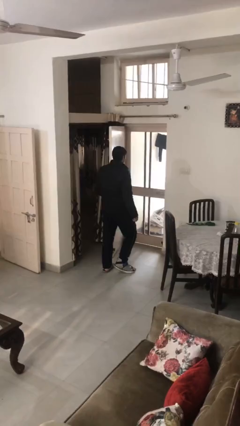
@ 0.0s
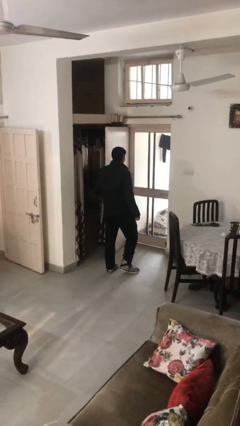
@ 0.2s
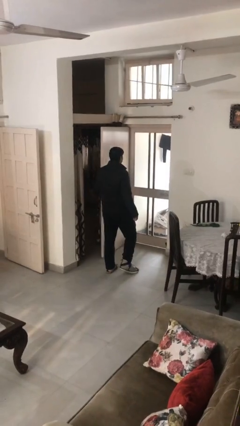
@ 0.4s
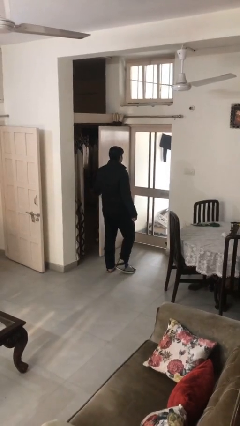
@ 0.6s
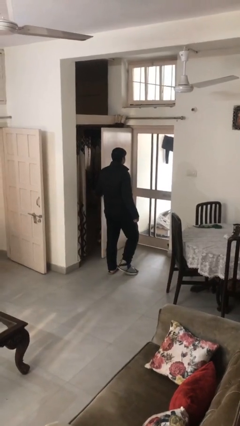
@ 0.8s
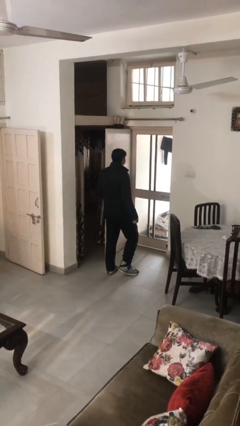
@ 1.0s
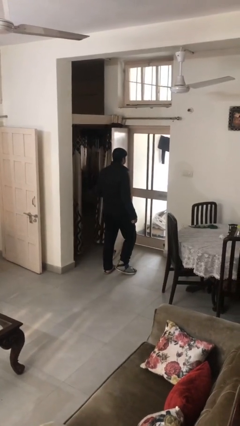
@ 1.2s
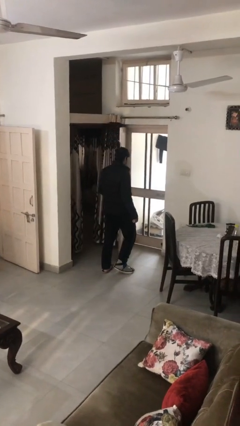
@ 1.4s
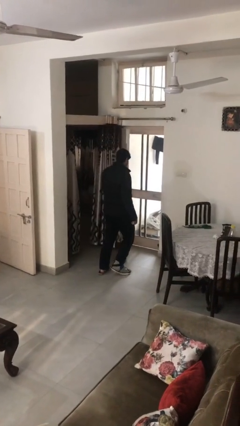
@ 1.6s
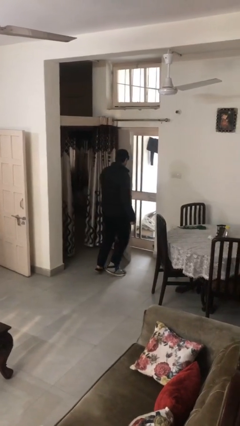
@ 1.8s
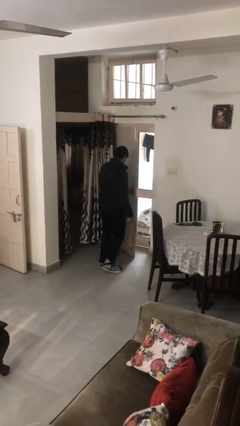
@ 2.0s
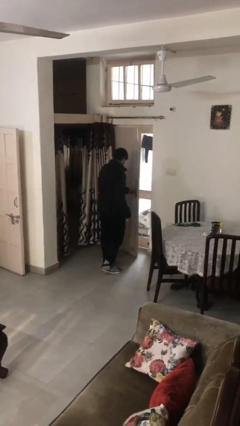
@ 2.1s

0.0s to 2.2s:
person closes facility door

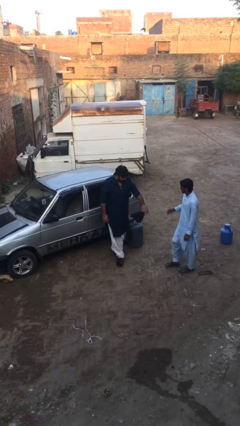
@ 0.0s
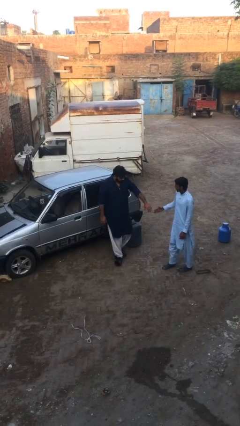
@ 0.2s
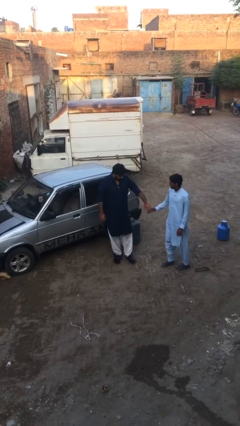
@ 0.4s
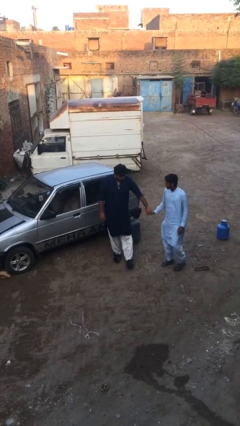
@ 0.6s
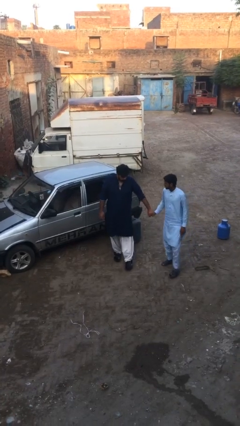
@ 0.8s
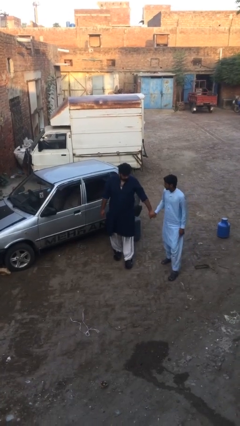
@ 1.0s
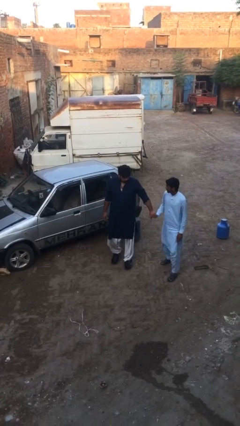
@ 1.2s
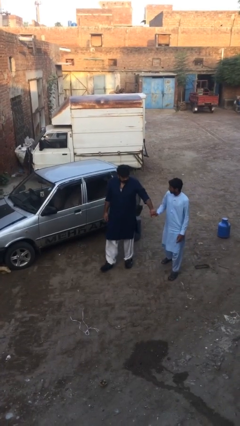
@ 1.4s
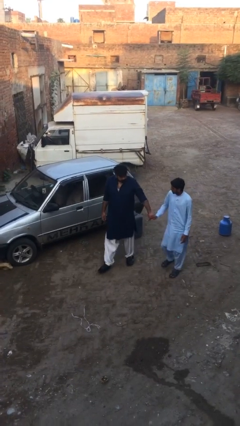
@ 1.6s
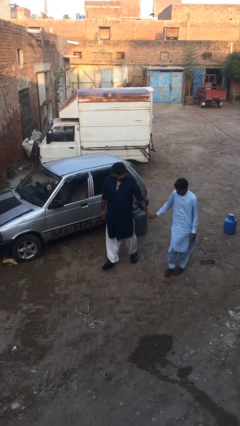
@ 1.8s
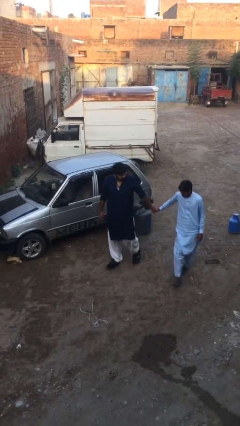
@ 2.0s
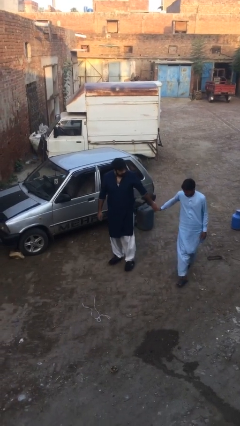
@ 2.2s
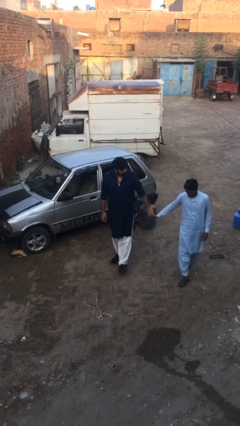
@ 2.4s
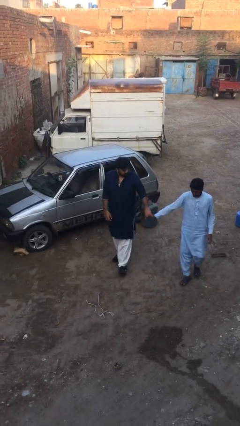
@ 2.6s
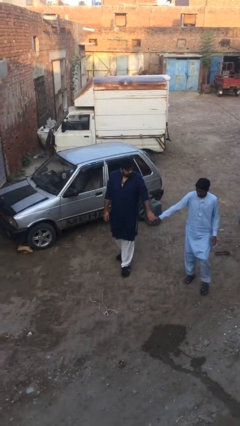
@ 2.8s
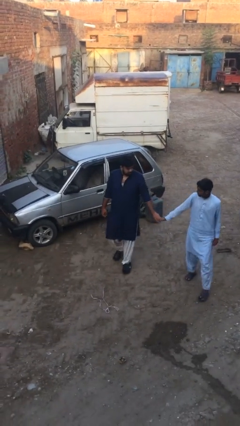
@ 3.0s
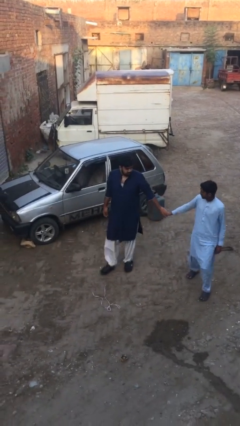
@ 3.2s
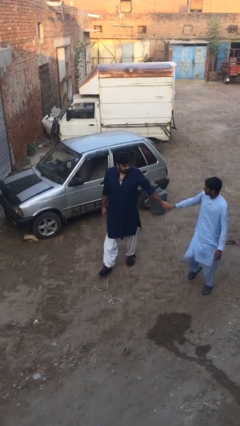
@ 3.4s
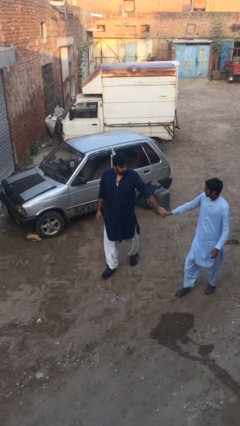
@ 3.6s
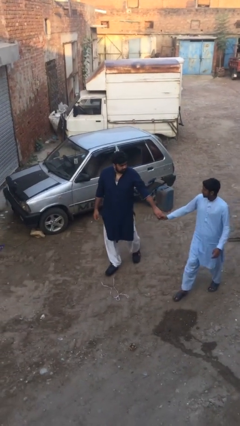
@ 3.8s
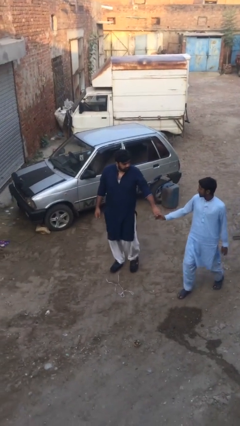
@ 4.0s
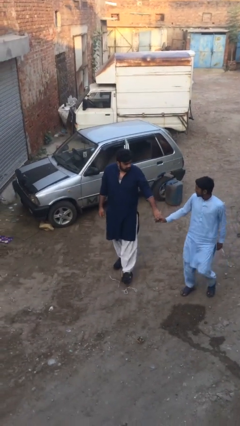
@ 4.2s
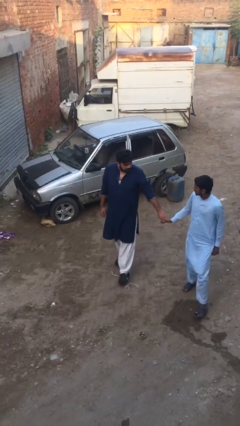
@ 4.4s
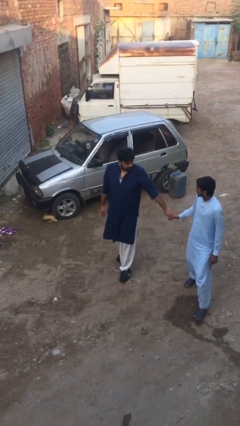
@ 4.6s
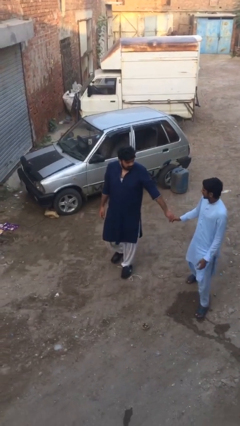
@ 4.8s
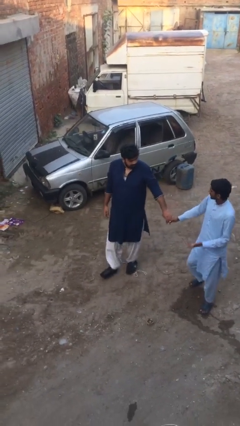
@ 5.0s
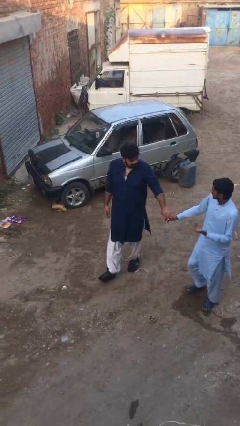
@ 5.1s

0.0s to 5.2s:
person holds hand

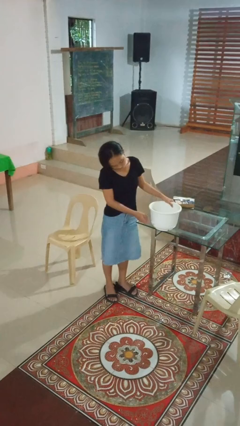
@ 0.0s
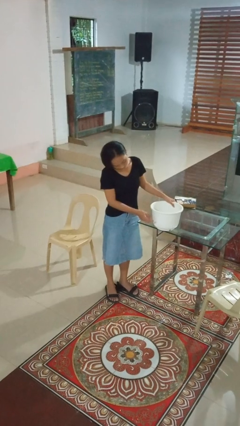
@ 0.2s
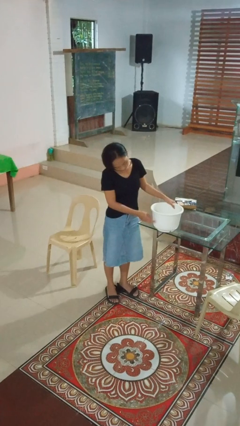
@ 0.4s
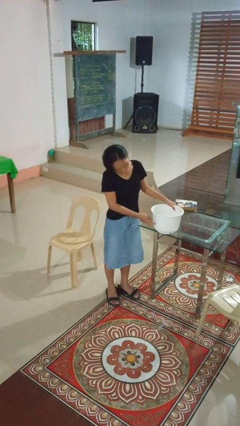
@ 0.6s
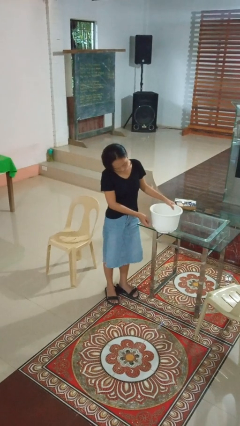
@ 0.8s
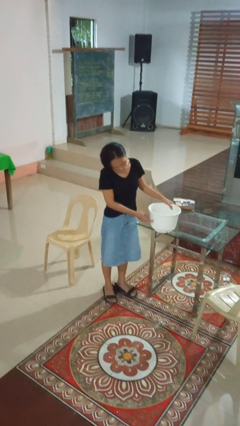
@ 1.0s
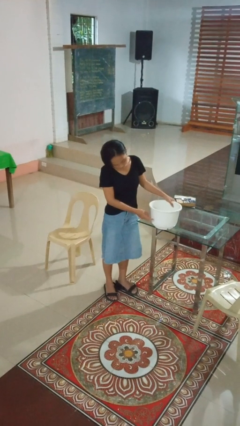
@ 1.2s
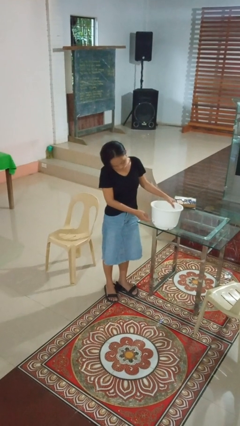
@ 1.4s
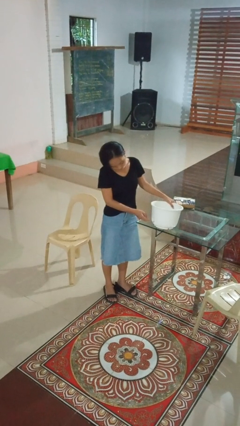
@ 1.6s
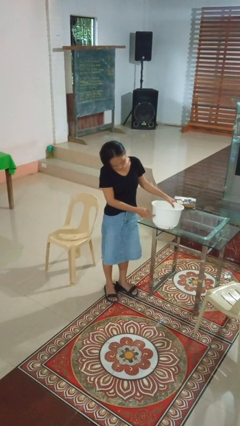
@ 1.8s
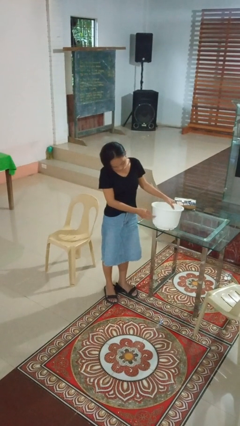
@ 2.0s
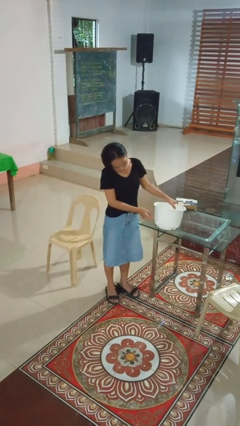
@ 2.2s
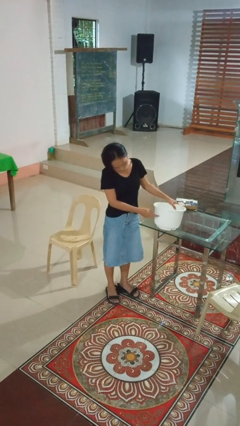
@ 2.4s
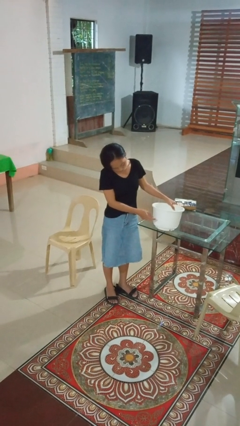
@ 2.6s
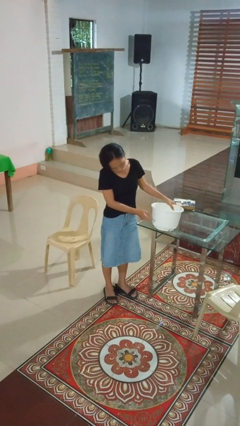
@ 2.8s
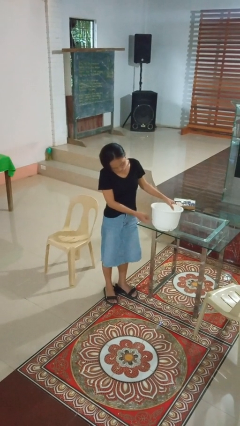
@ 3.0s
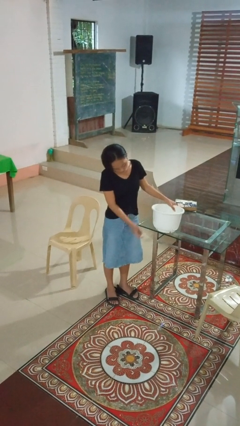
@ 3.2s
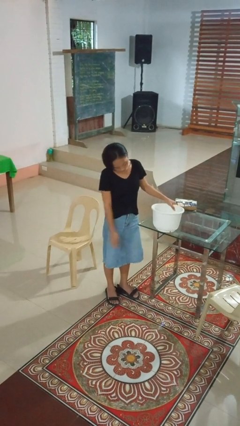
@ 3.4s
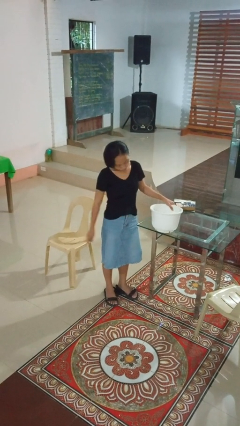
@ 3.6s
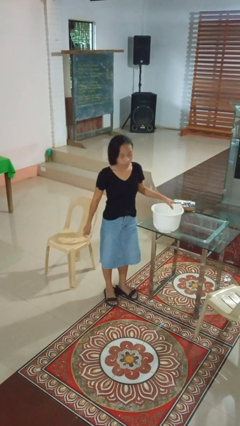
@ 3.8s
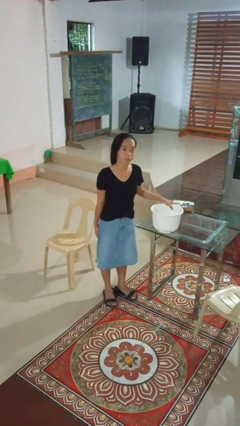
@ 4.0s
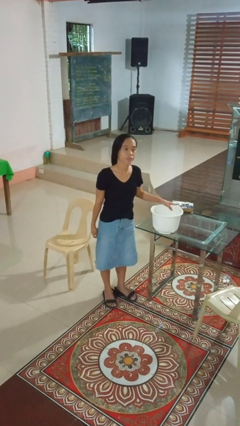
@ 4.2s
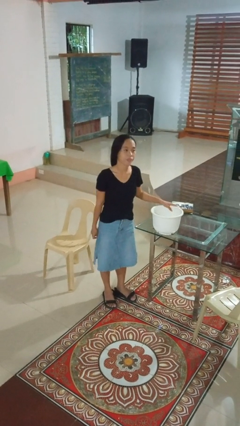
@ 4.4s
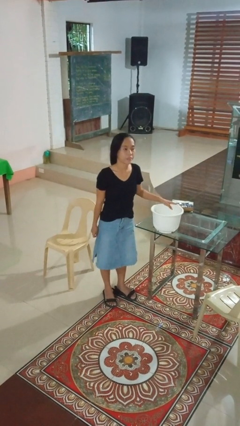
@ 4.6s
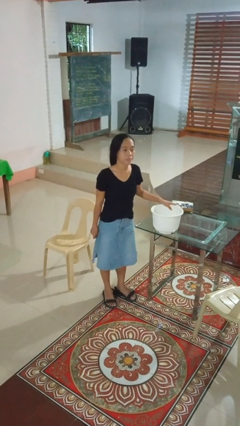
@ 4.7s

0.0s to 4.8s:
person taps object with finger

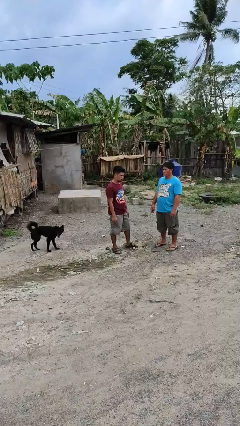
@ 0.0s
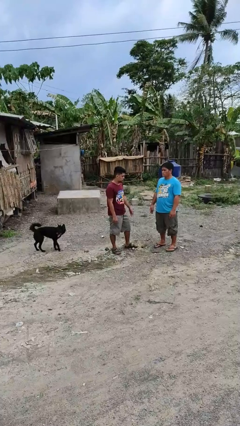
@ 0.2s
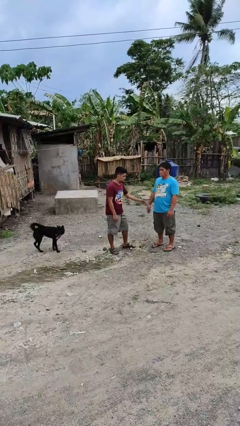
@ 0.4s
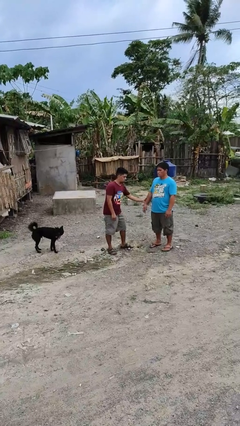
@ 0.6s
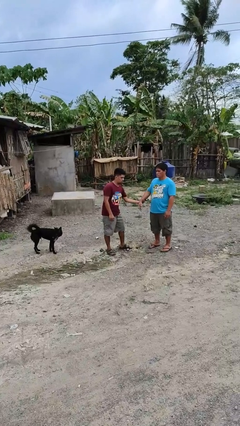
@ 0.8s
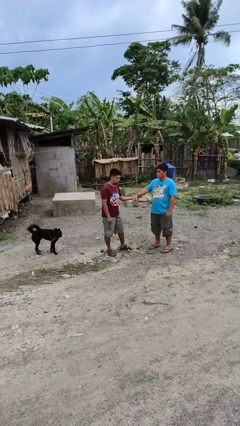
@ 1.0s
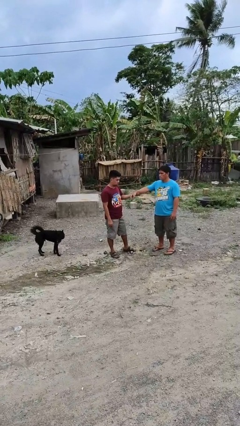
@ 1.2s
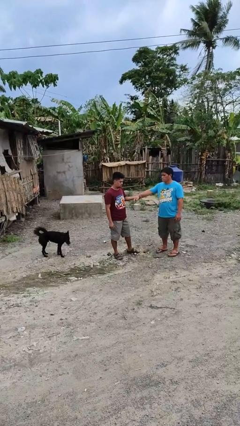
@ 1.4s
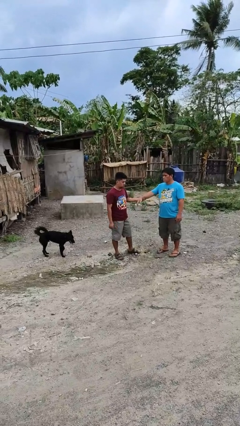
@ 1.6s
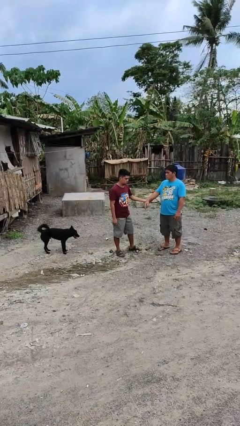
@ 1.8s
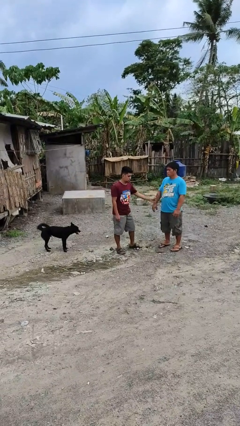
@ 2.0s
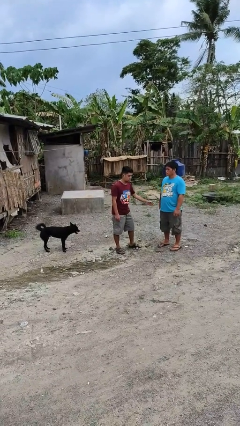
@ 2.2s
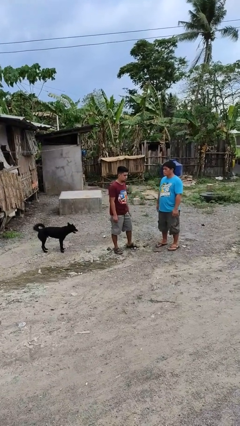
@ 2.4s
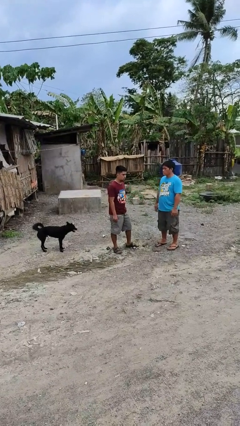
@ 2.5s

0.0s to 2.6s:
person grabs person by forearm

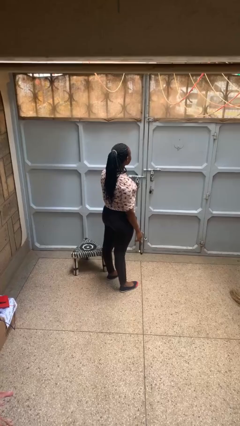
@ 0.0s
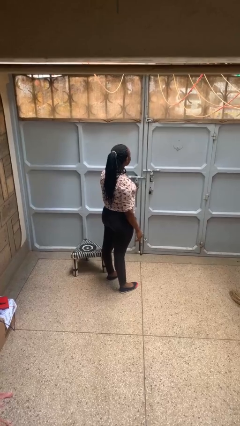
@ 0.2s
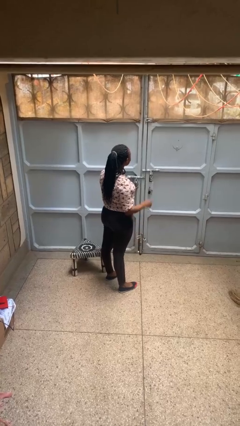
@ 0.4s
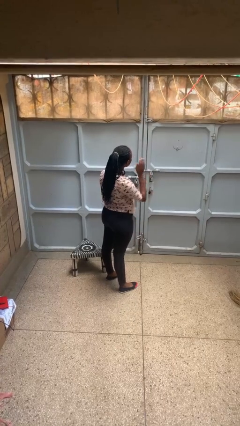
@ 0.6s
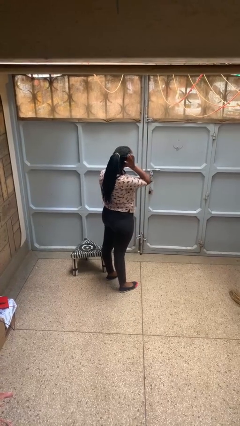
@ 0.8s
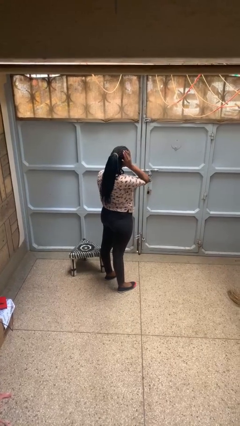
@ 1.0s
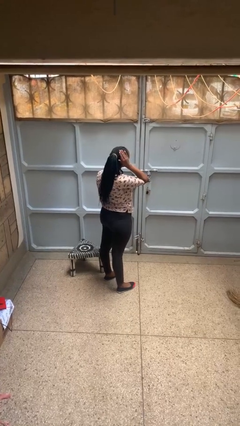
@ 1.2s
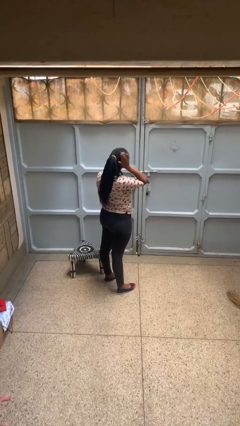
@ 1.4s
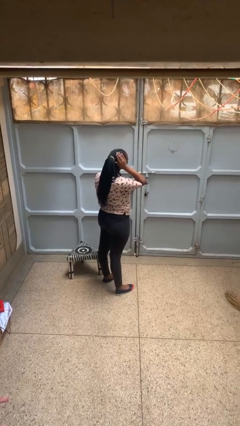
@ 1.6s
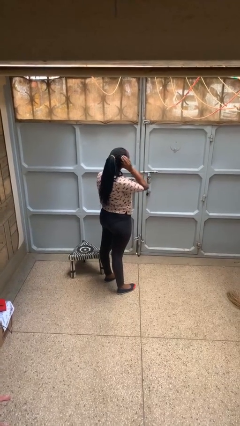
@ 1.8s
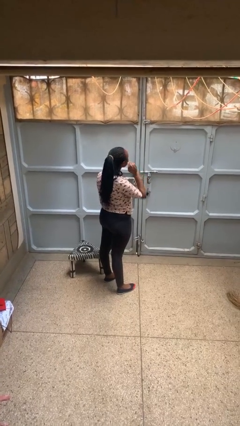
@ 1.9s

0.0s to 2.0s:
person pats head

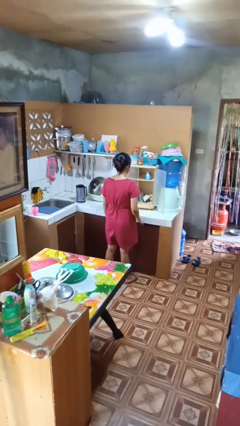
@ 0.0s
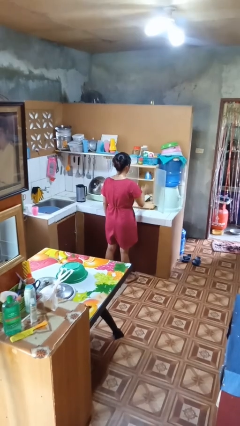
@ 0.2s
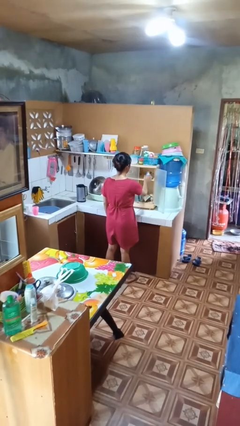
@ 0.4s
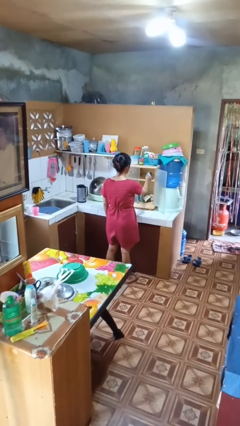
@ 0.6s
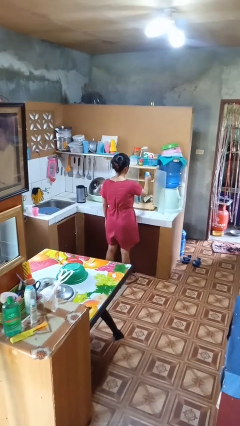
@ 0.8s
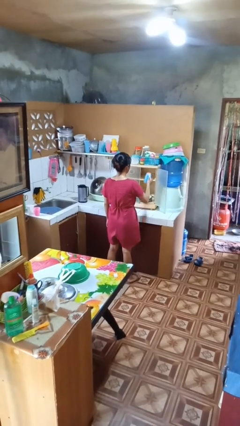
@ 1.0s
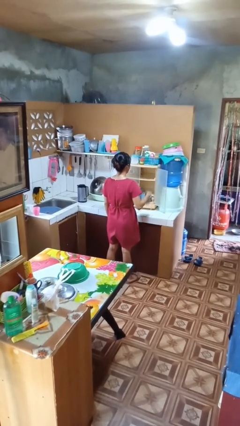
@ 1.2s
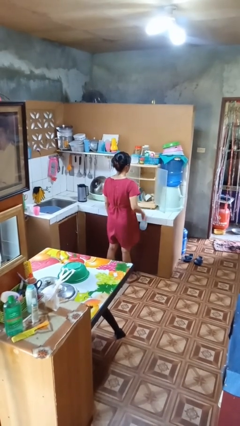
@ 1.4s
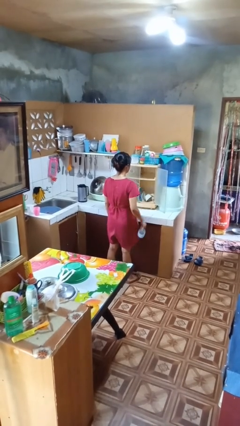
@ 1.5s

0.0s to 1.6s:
person takes object from cabinet
